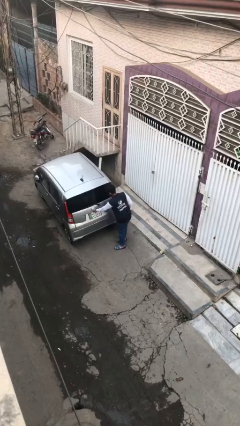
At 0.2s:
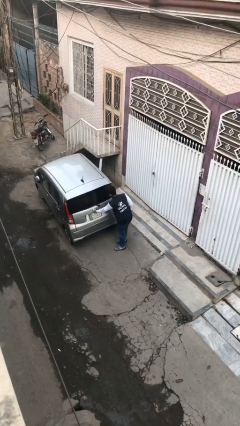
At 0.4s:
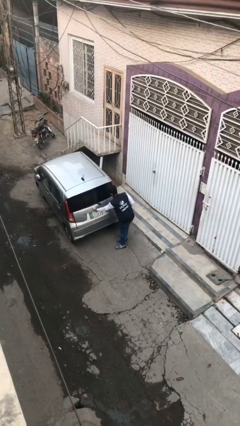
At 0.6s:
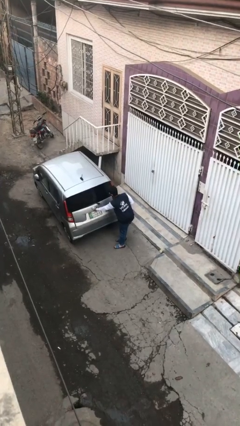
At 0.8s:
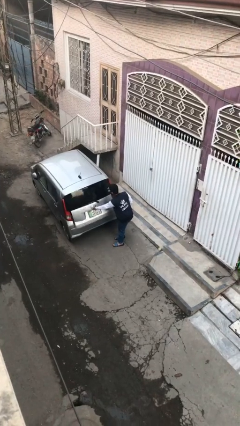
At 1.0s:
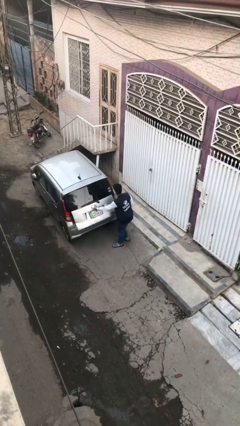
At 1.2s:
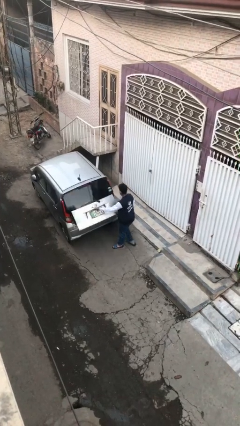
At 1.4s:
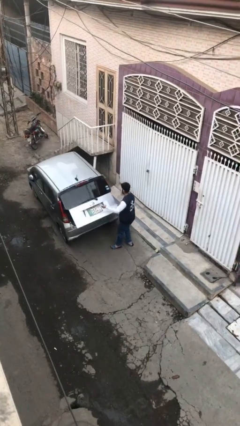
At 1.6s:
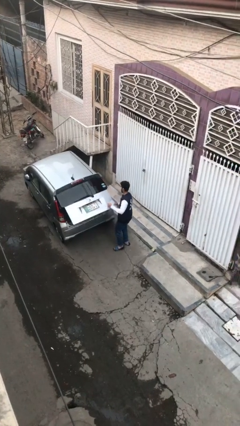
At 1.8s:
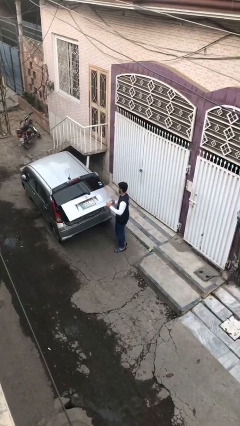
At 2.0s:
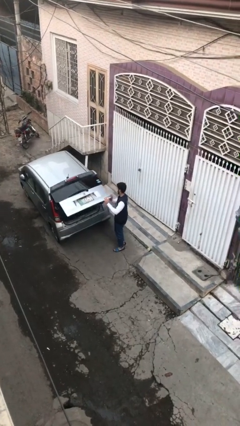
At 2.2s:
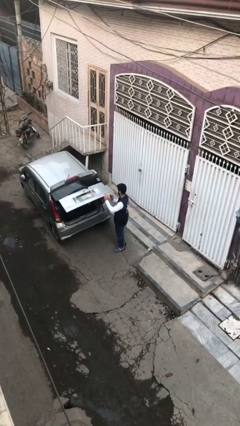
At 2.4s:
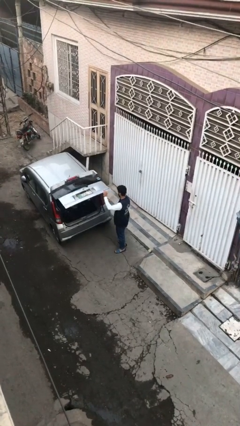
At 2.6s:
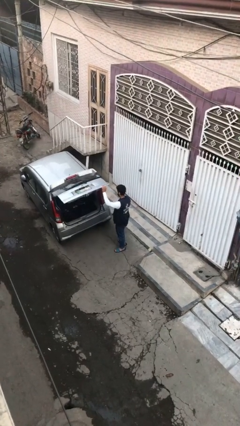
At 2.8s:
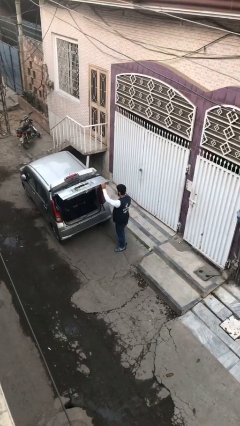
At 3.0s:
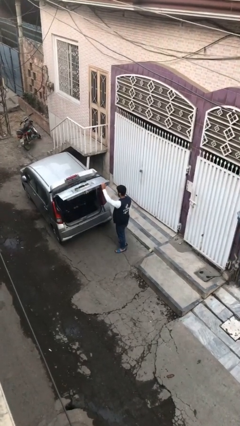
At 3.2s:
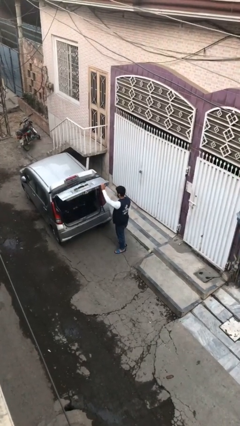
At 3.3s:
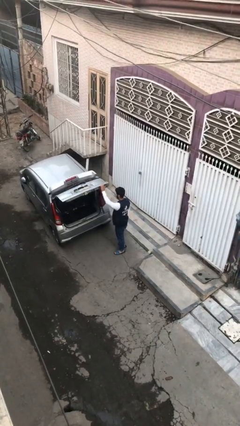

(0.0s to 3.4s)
person opens car trunk

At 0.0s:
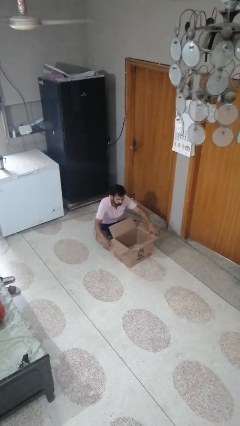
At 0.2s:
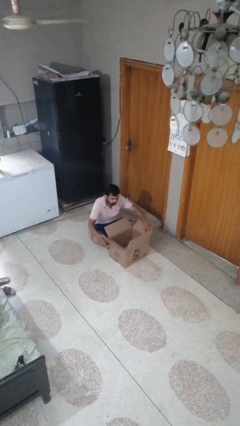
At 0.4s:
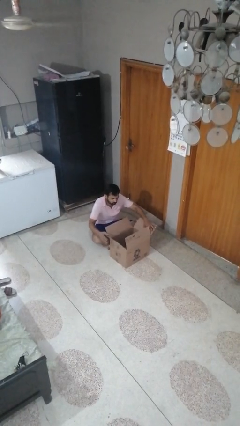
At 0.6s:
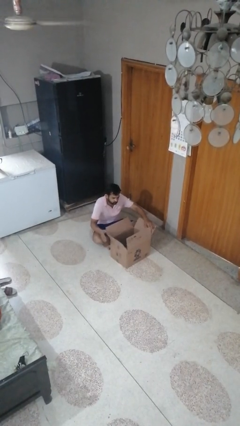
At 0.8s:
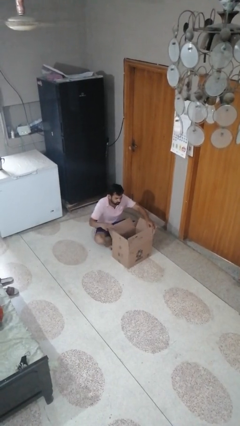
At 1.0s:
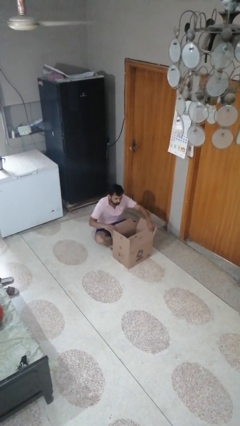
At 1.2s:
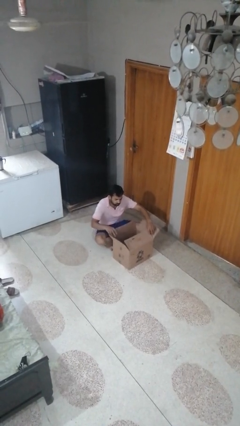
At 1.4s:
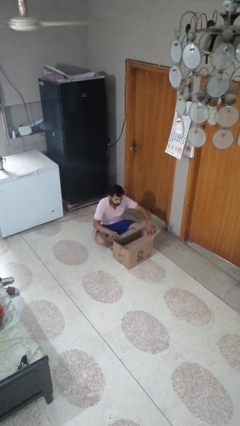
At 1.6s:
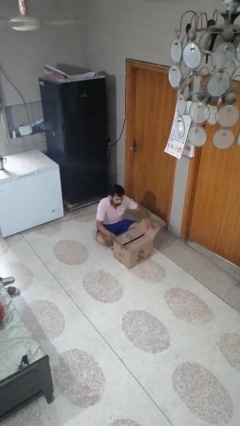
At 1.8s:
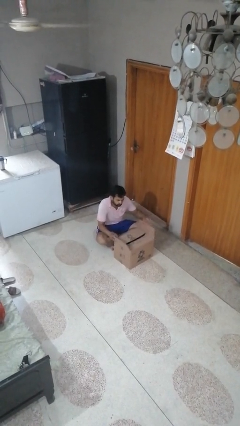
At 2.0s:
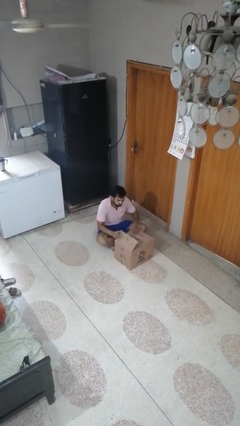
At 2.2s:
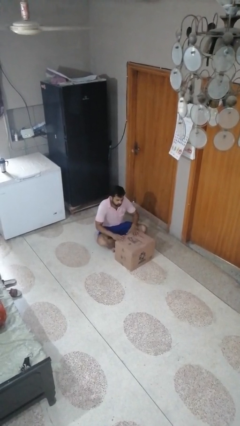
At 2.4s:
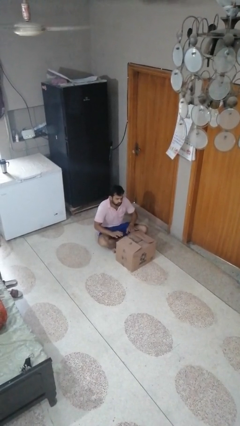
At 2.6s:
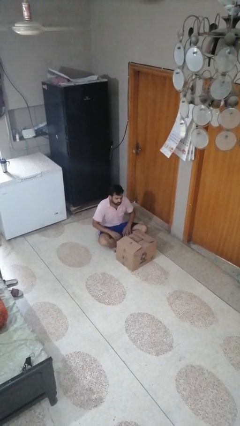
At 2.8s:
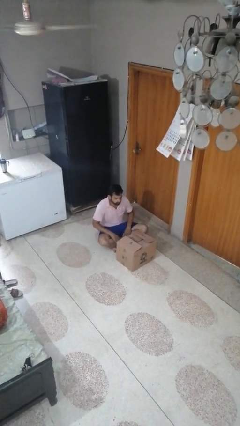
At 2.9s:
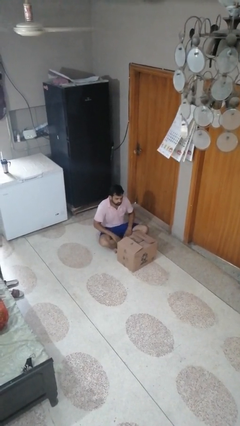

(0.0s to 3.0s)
person closes box

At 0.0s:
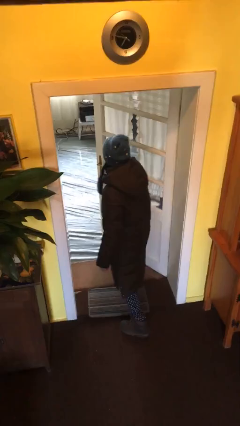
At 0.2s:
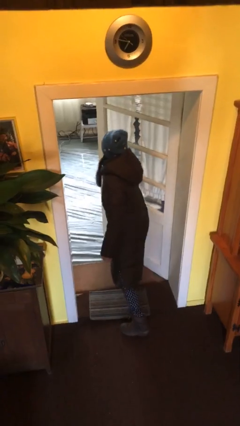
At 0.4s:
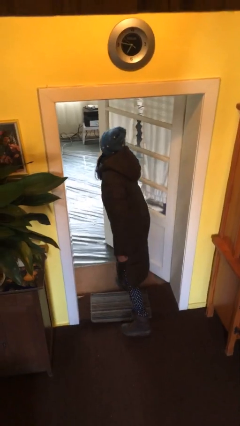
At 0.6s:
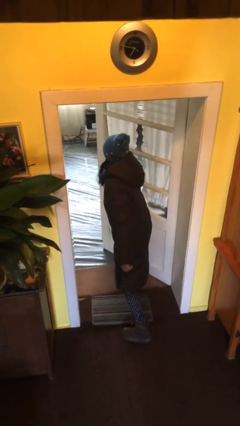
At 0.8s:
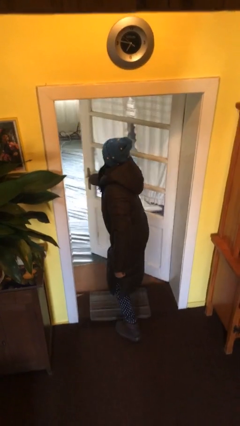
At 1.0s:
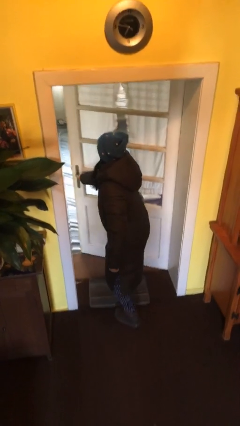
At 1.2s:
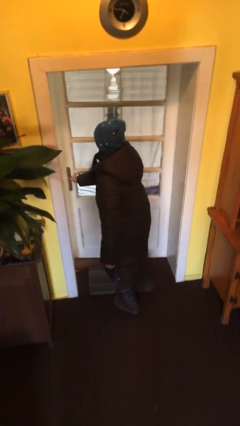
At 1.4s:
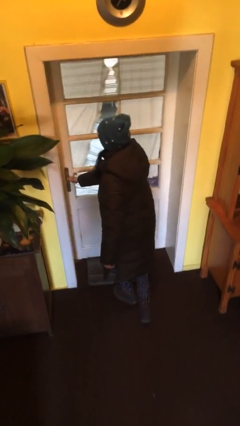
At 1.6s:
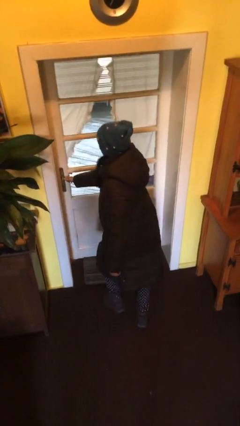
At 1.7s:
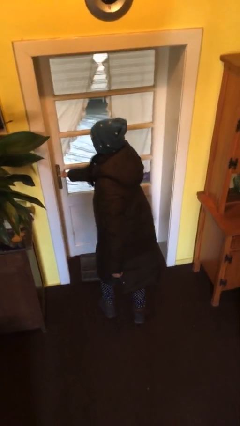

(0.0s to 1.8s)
person closes facility door

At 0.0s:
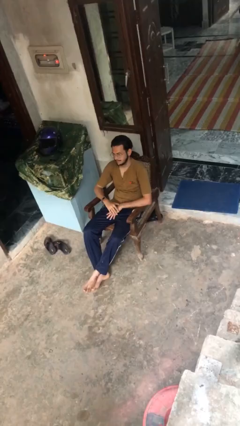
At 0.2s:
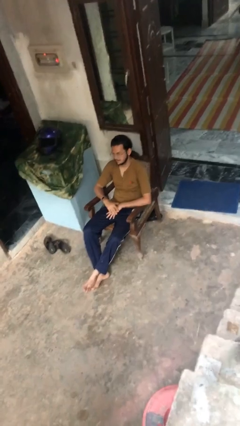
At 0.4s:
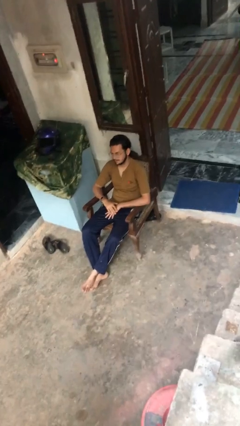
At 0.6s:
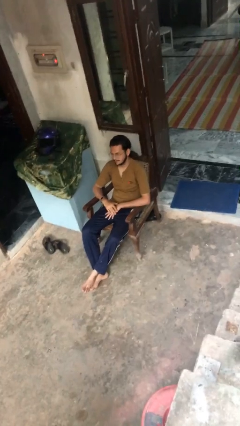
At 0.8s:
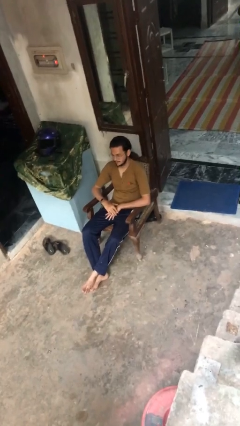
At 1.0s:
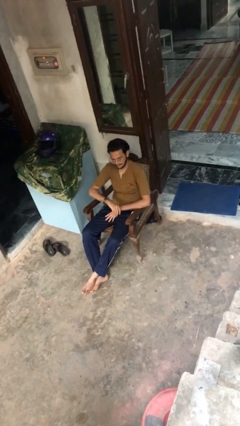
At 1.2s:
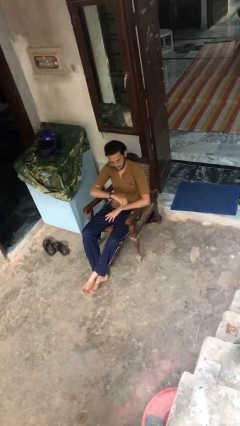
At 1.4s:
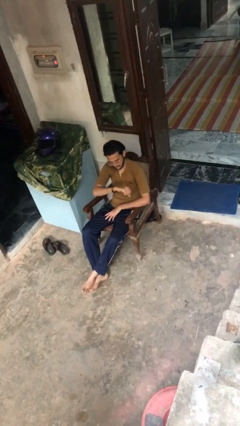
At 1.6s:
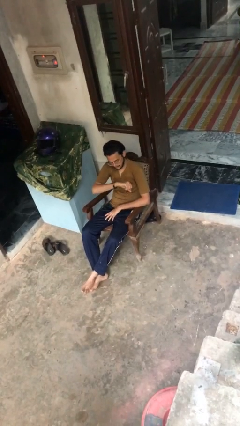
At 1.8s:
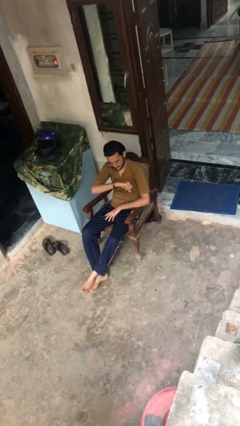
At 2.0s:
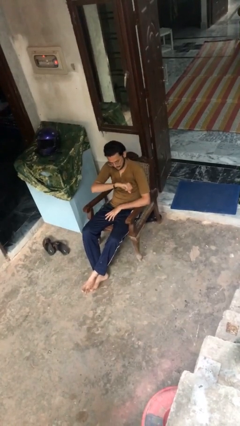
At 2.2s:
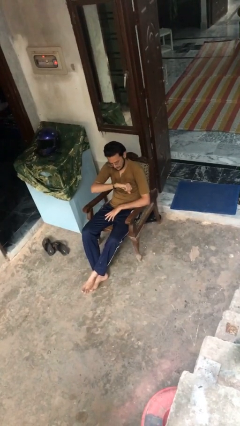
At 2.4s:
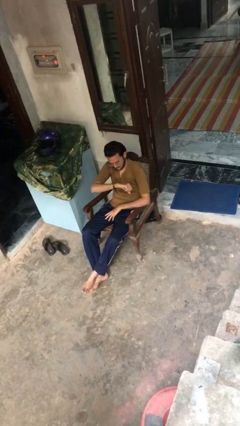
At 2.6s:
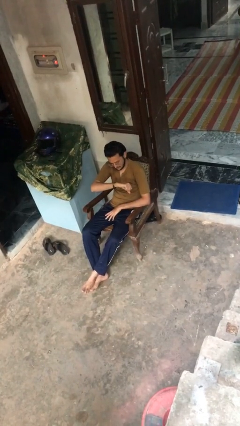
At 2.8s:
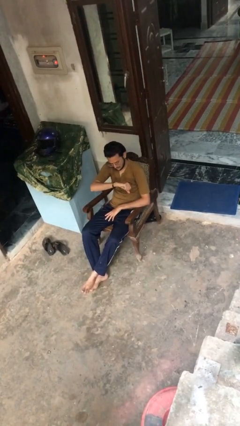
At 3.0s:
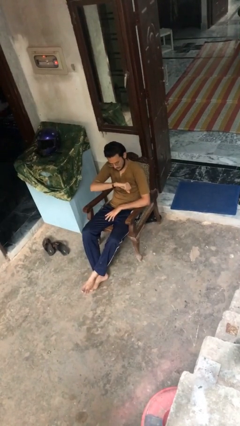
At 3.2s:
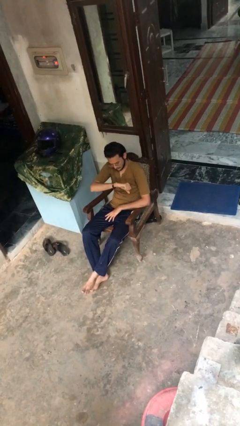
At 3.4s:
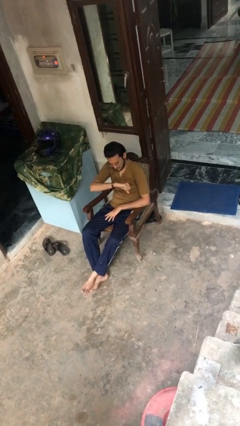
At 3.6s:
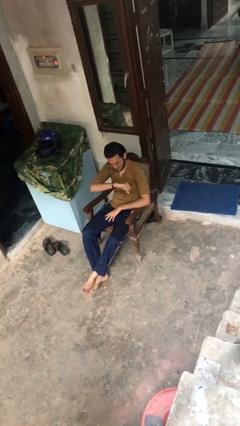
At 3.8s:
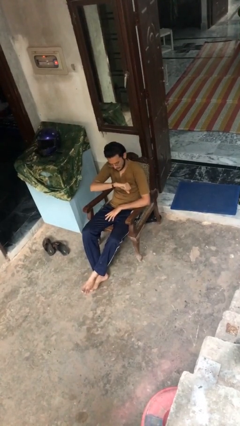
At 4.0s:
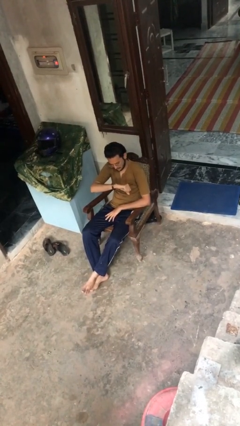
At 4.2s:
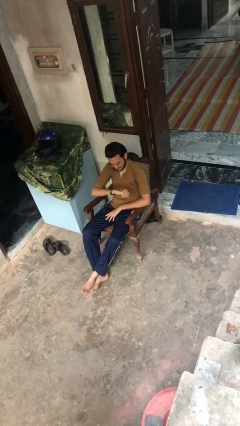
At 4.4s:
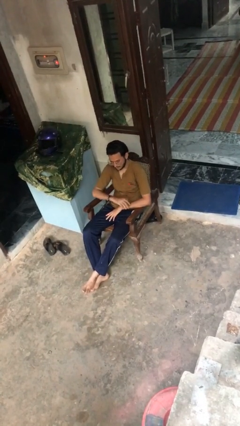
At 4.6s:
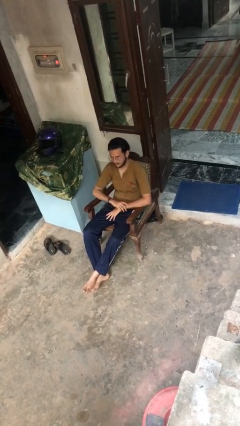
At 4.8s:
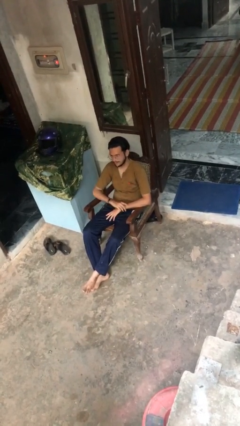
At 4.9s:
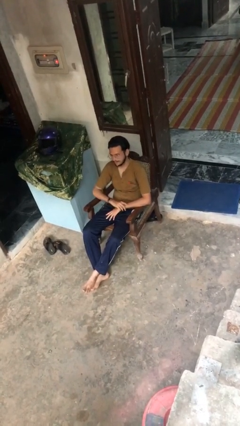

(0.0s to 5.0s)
person looks at wristwatch

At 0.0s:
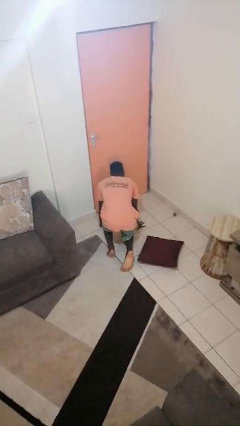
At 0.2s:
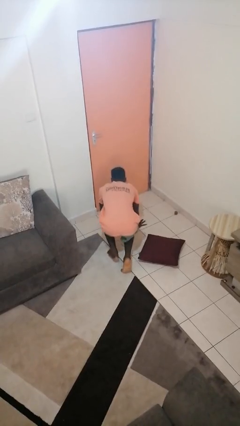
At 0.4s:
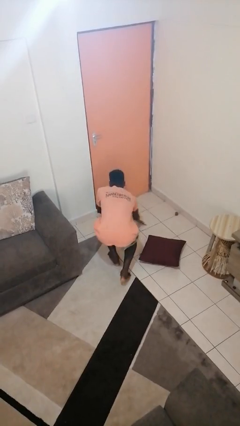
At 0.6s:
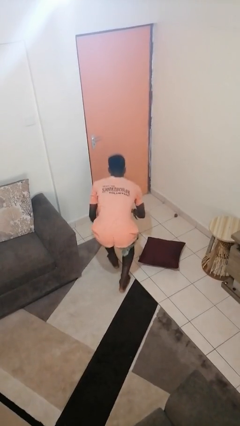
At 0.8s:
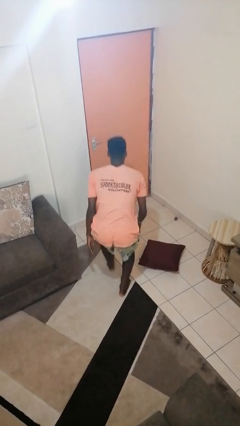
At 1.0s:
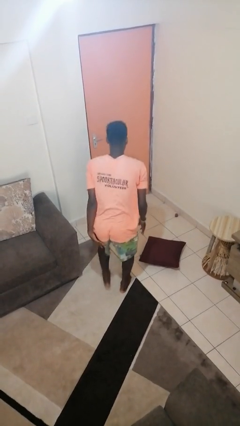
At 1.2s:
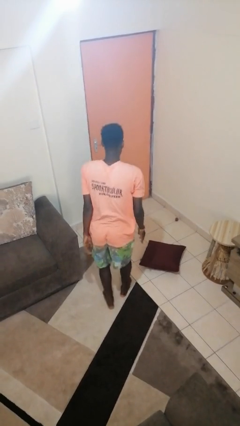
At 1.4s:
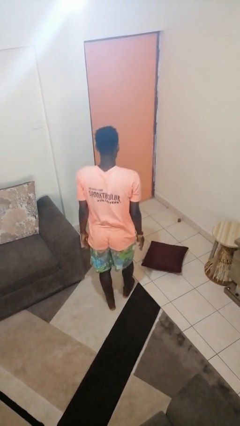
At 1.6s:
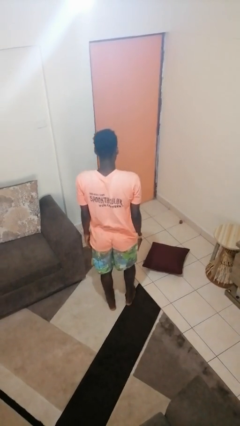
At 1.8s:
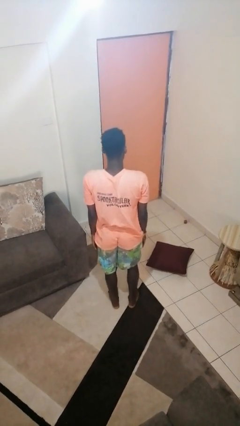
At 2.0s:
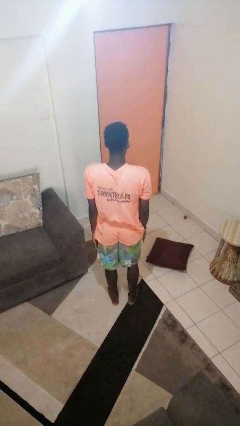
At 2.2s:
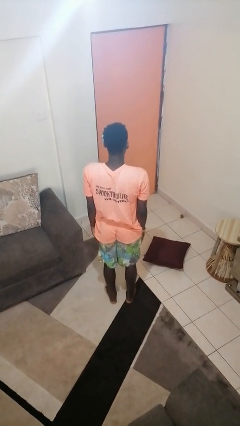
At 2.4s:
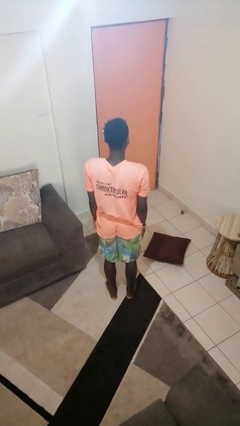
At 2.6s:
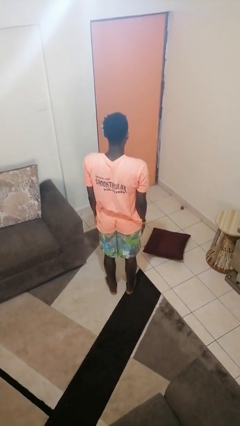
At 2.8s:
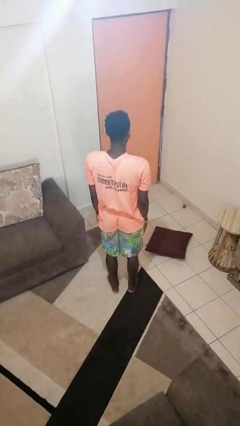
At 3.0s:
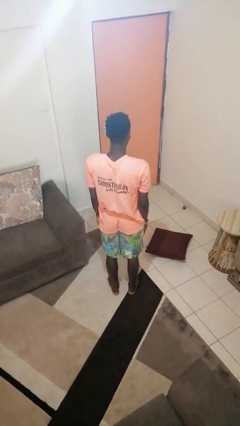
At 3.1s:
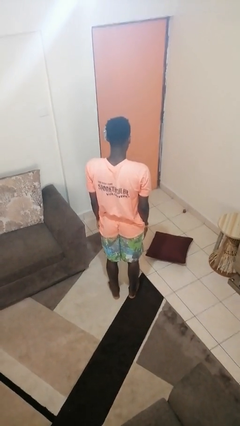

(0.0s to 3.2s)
person stands up from floor

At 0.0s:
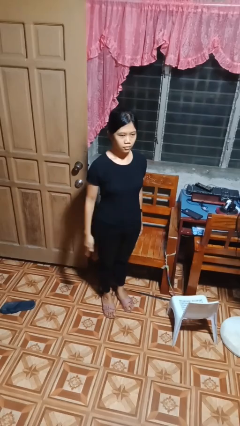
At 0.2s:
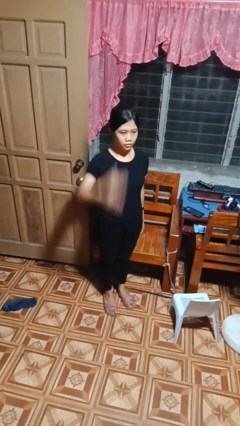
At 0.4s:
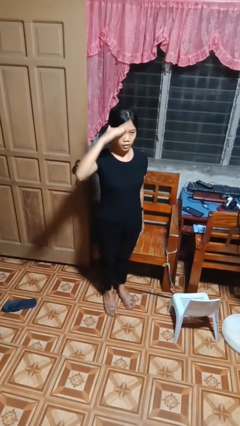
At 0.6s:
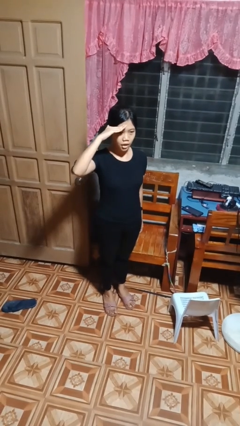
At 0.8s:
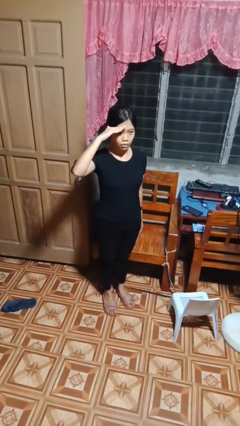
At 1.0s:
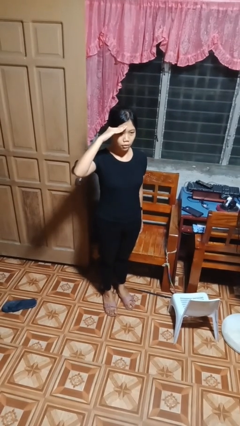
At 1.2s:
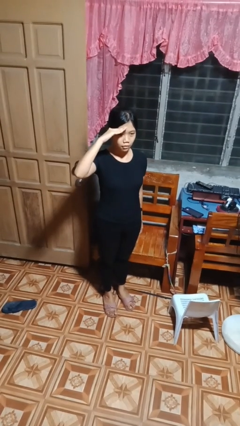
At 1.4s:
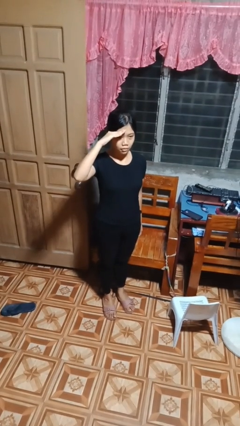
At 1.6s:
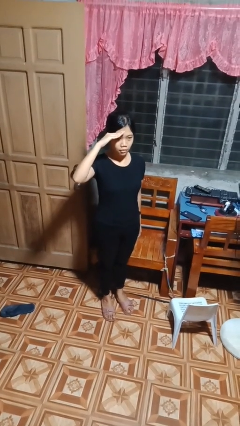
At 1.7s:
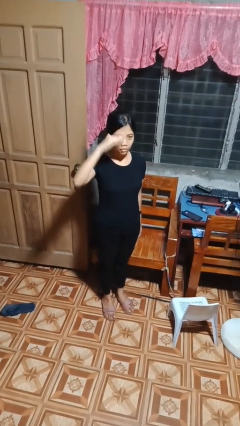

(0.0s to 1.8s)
person salutes
